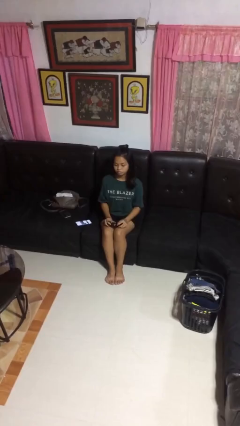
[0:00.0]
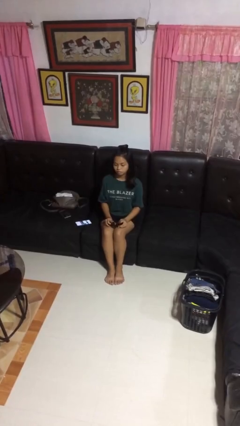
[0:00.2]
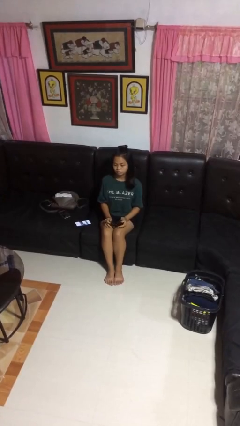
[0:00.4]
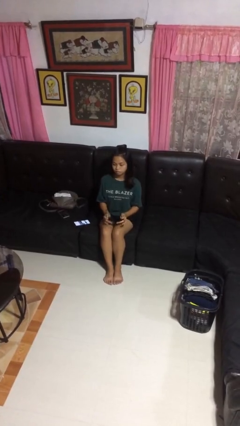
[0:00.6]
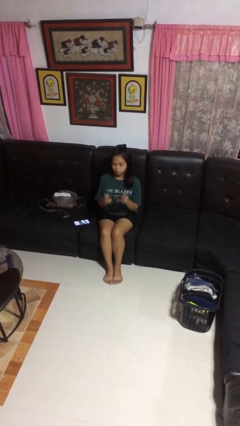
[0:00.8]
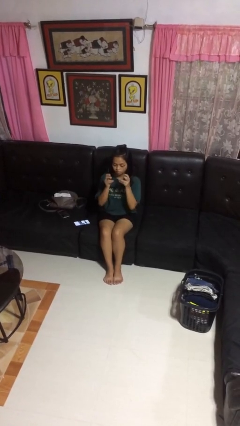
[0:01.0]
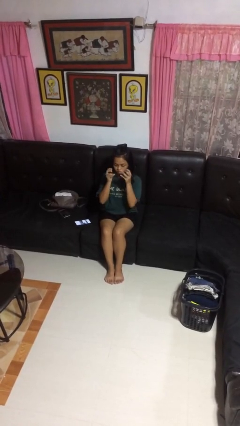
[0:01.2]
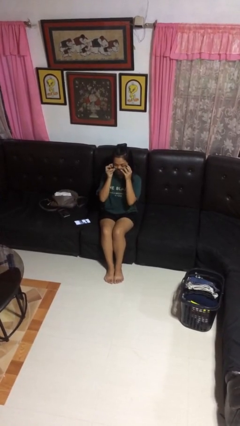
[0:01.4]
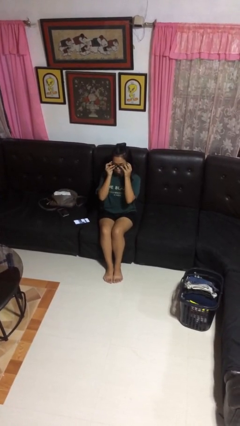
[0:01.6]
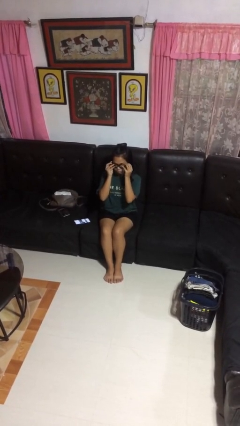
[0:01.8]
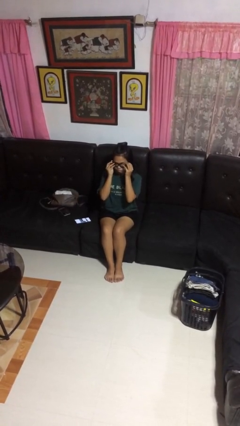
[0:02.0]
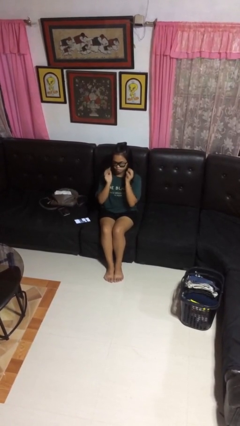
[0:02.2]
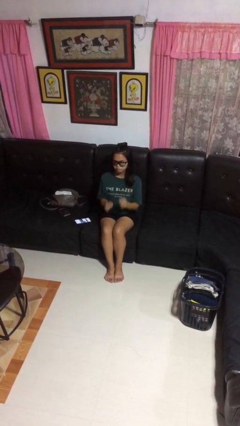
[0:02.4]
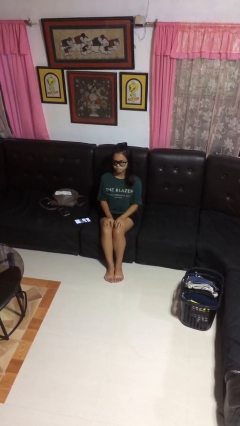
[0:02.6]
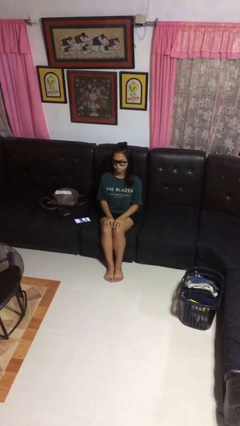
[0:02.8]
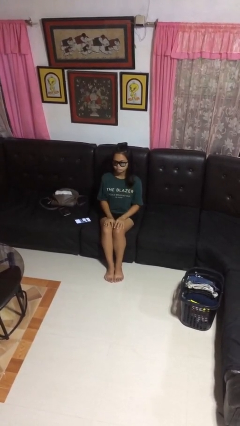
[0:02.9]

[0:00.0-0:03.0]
person puts on sunglasses

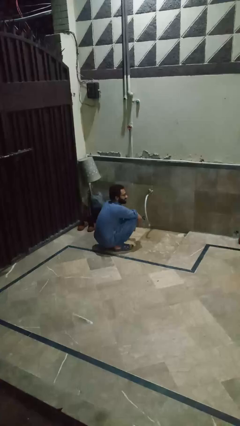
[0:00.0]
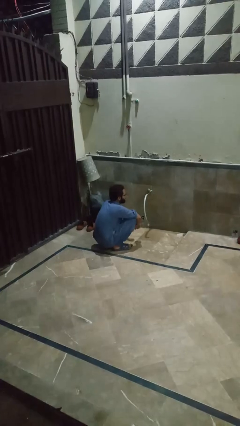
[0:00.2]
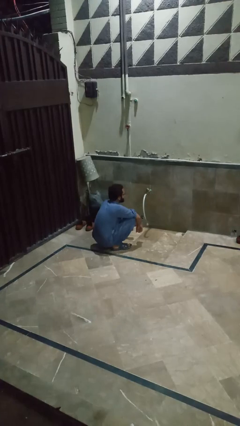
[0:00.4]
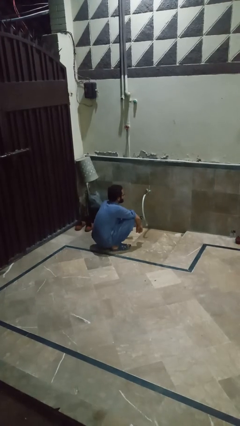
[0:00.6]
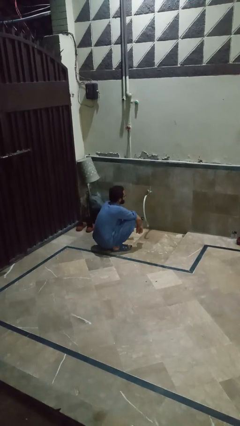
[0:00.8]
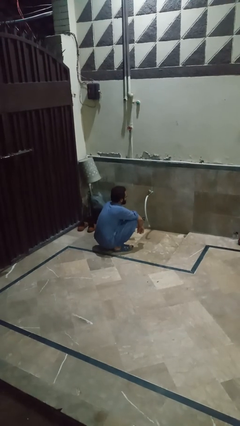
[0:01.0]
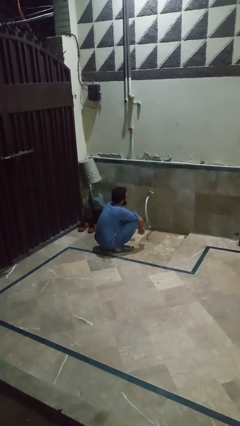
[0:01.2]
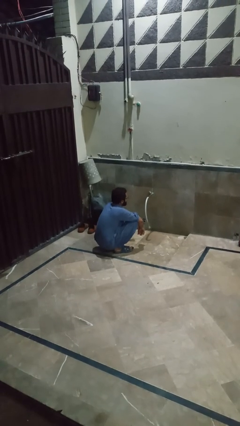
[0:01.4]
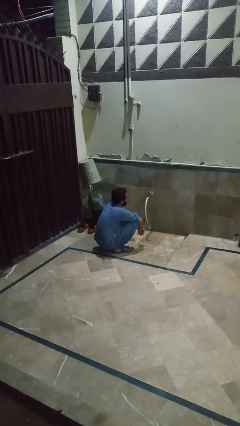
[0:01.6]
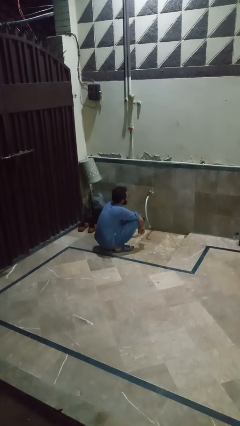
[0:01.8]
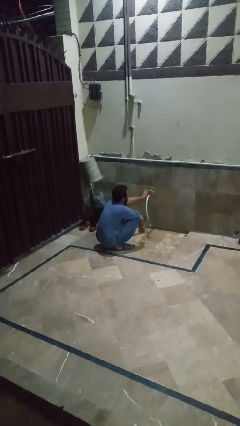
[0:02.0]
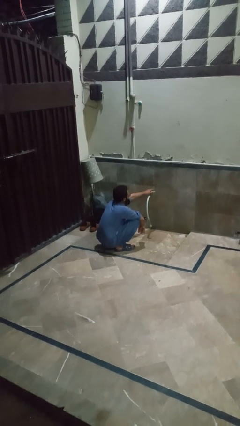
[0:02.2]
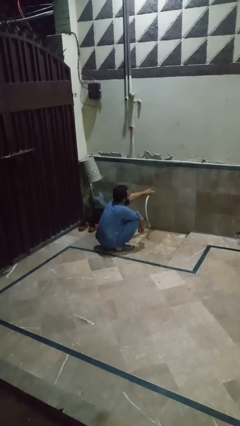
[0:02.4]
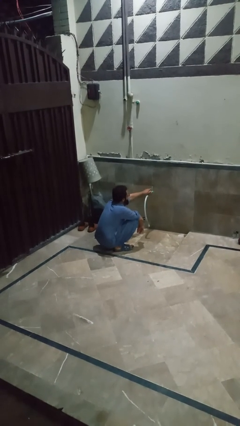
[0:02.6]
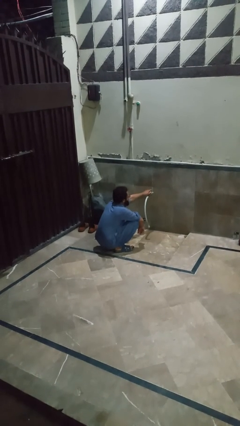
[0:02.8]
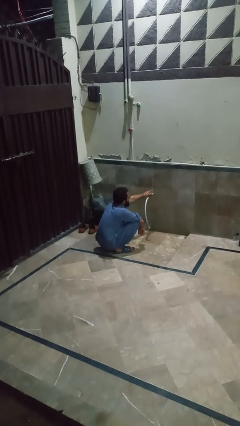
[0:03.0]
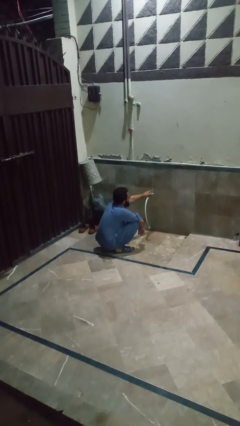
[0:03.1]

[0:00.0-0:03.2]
person turns on faucet

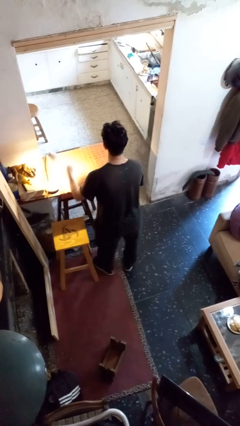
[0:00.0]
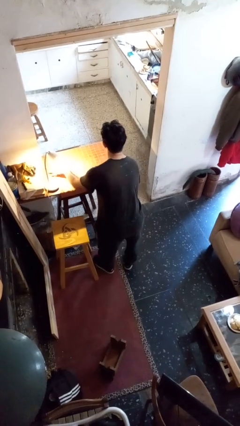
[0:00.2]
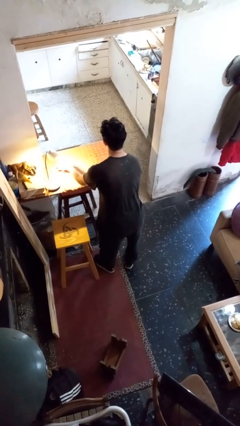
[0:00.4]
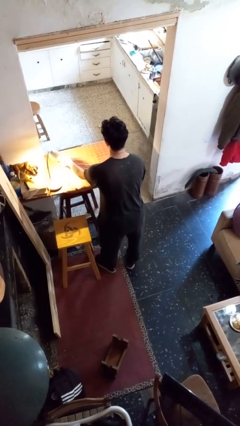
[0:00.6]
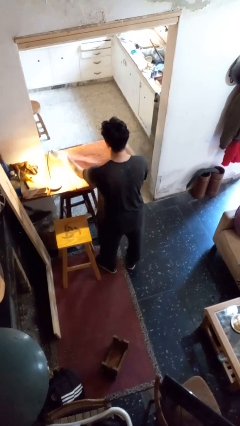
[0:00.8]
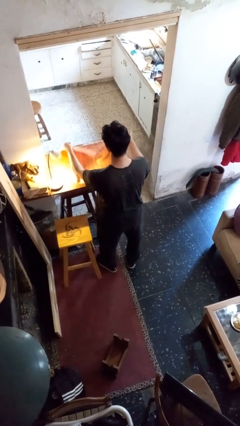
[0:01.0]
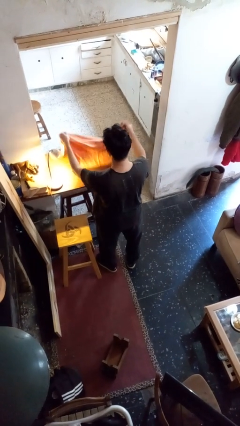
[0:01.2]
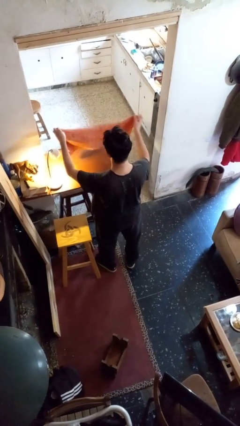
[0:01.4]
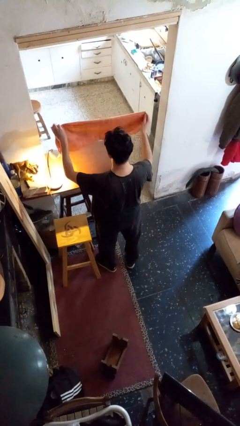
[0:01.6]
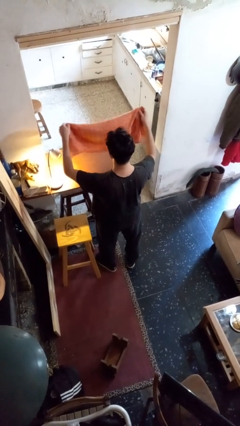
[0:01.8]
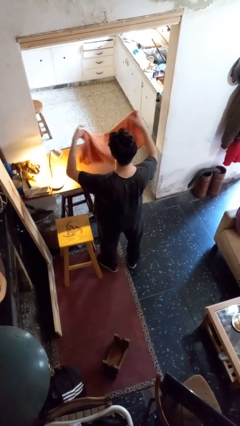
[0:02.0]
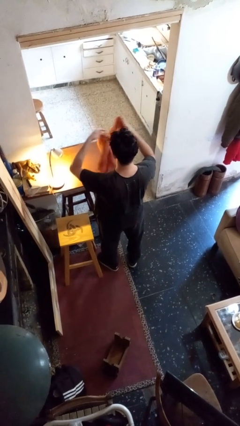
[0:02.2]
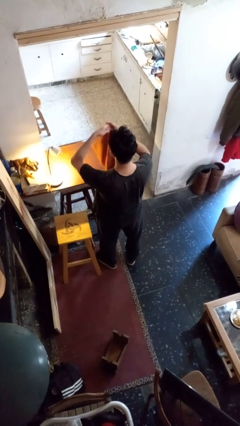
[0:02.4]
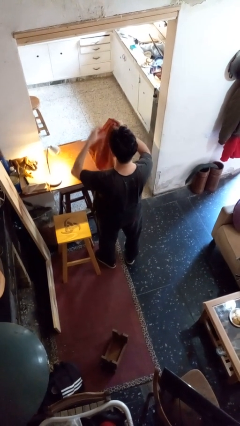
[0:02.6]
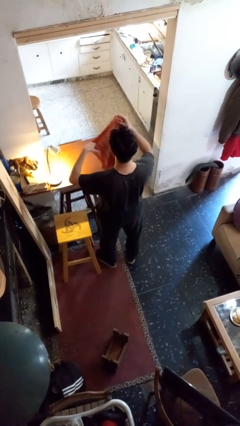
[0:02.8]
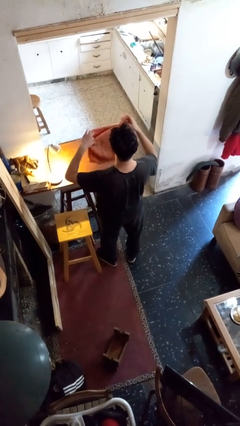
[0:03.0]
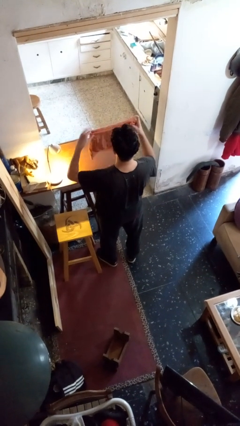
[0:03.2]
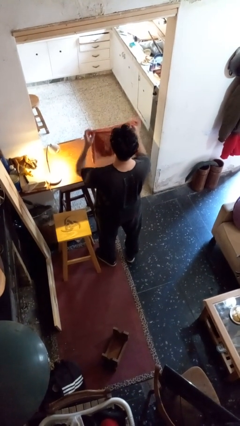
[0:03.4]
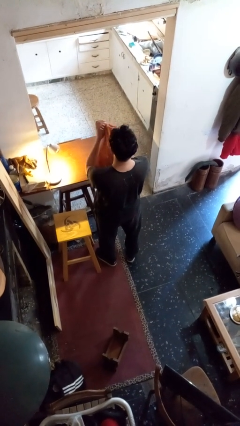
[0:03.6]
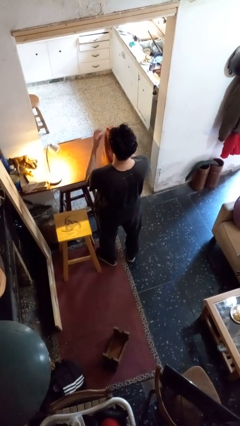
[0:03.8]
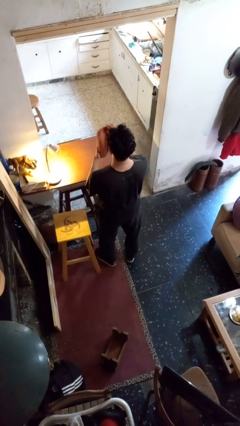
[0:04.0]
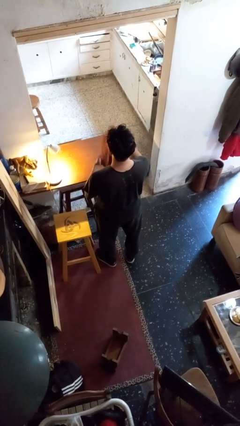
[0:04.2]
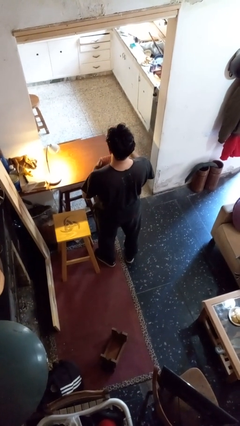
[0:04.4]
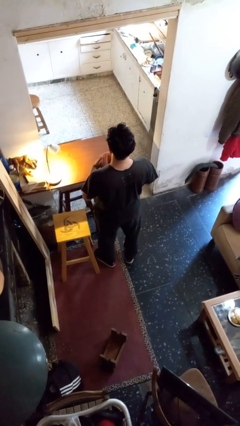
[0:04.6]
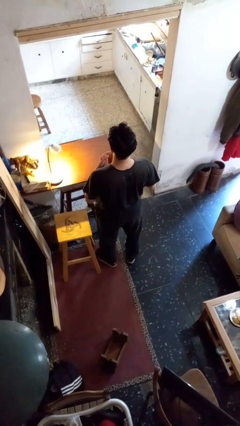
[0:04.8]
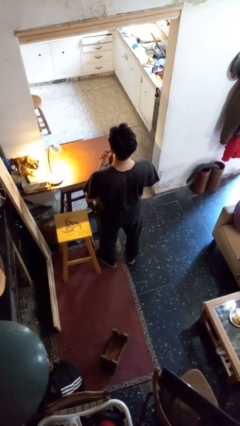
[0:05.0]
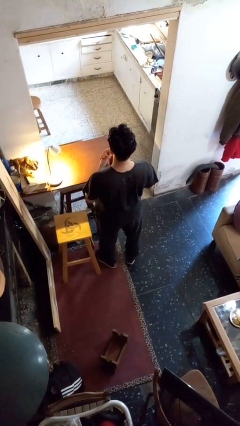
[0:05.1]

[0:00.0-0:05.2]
person folds tablecloth

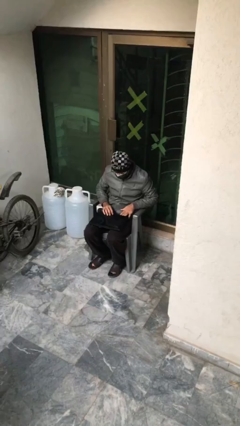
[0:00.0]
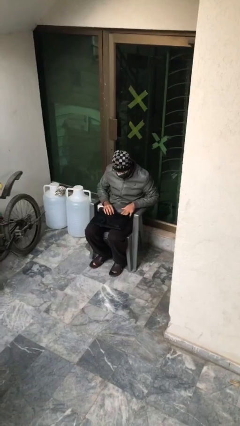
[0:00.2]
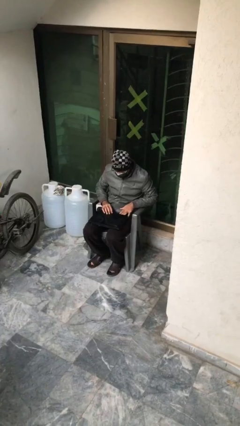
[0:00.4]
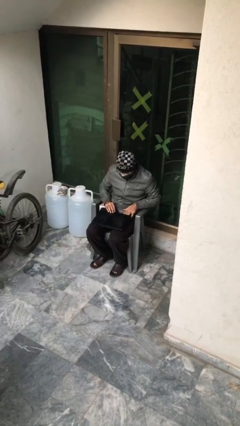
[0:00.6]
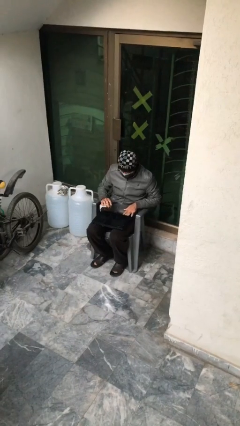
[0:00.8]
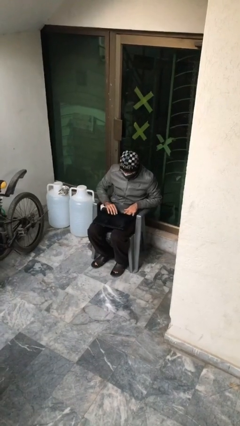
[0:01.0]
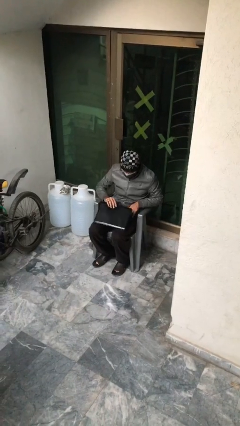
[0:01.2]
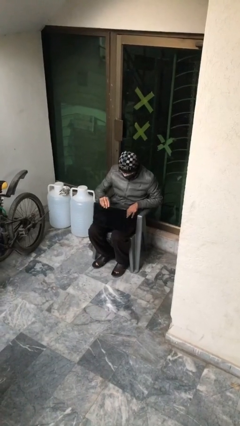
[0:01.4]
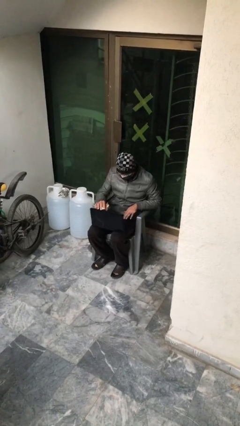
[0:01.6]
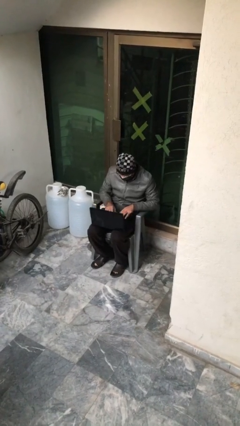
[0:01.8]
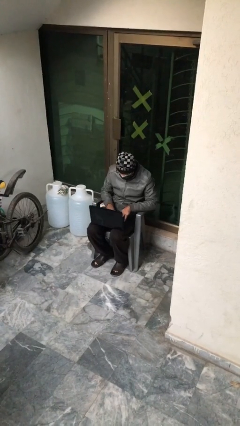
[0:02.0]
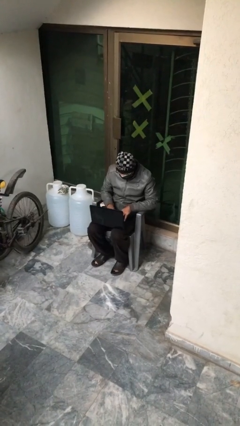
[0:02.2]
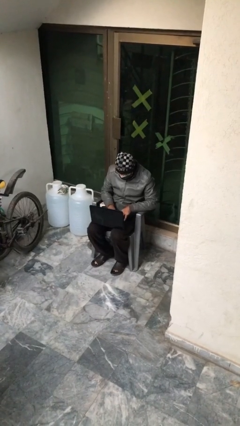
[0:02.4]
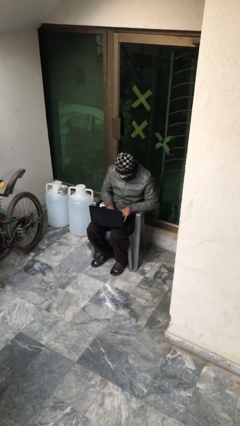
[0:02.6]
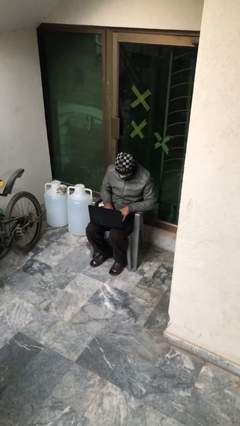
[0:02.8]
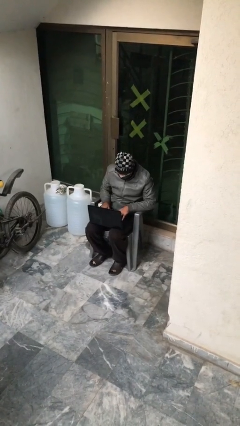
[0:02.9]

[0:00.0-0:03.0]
person interacts with laptop

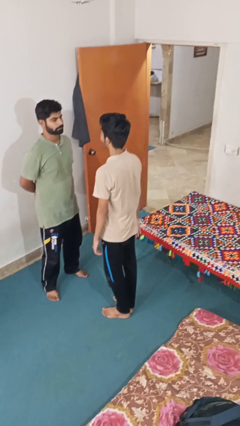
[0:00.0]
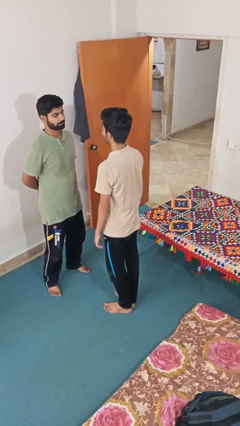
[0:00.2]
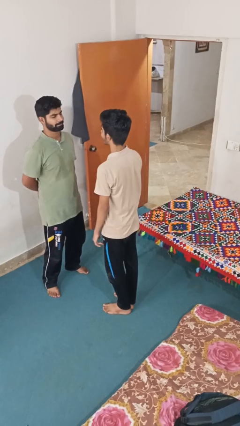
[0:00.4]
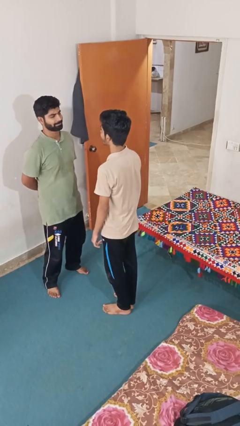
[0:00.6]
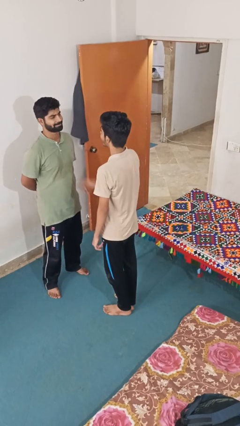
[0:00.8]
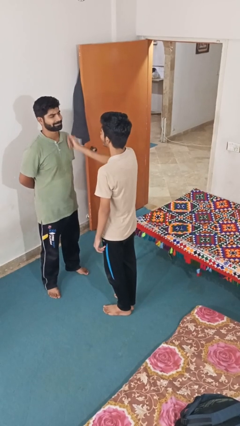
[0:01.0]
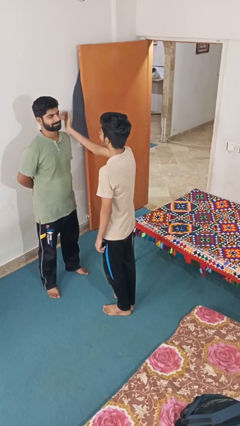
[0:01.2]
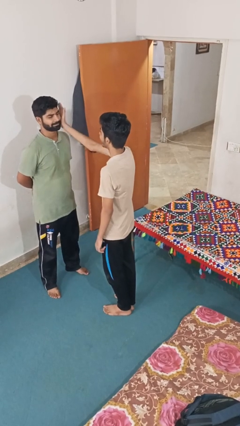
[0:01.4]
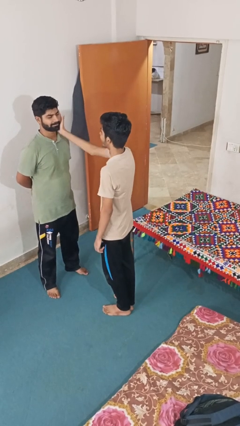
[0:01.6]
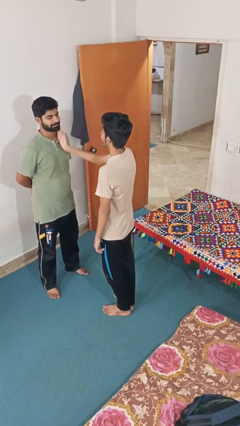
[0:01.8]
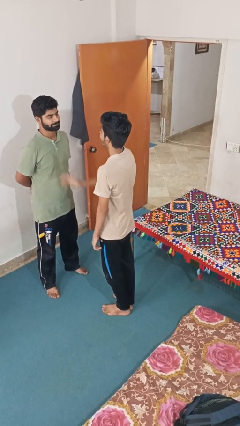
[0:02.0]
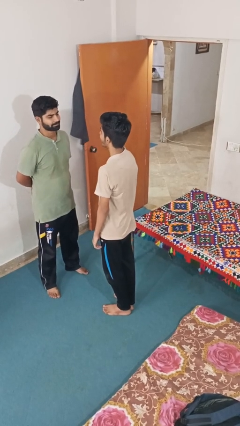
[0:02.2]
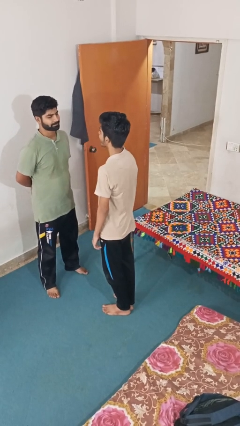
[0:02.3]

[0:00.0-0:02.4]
person touches face of person

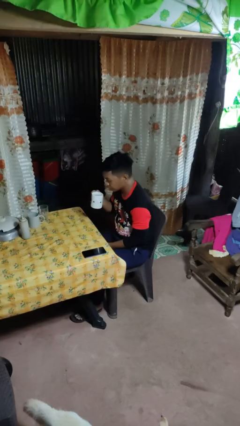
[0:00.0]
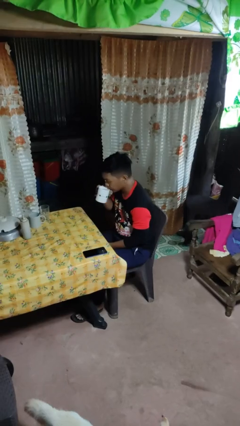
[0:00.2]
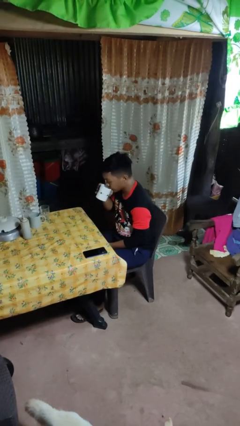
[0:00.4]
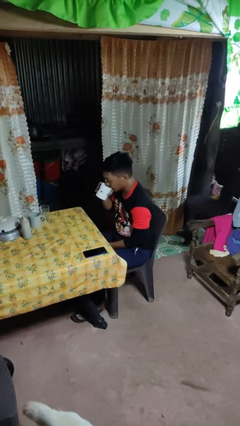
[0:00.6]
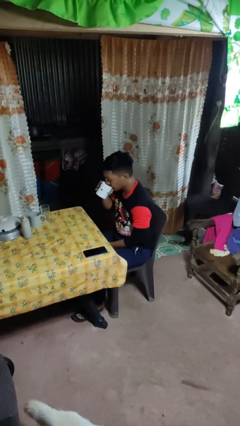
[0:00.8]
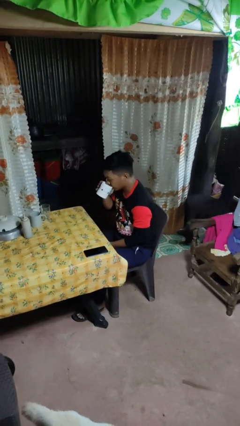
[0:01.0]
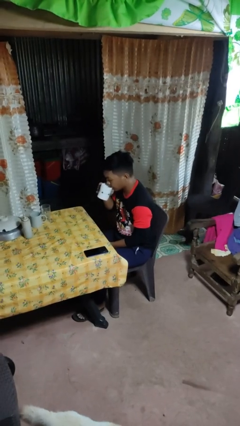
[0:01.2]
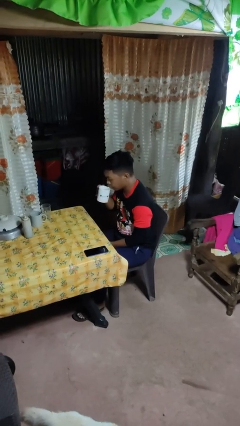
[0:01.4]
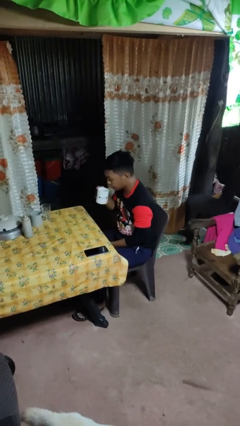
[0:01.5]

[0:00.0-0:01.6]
person drinks from mug
